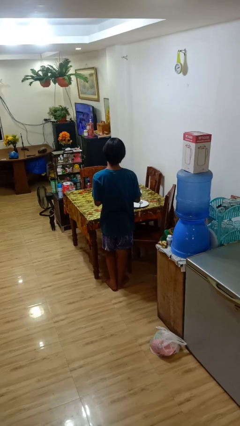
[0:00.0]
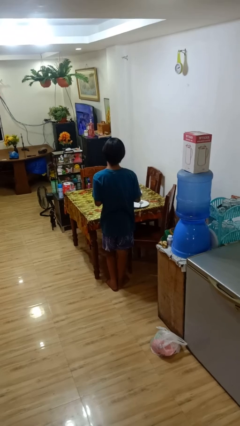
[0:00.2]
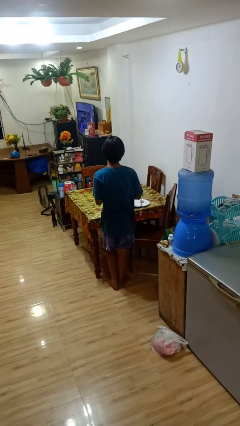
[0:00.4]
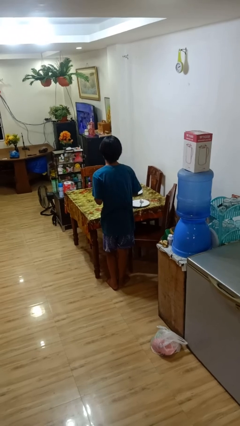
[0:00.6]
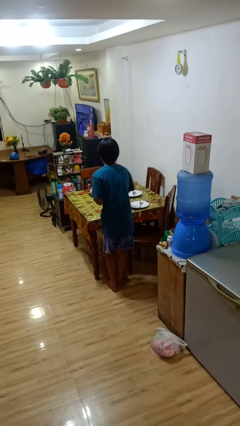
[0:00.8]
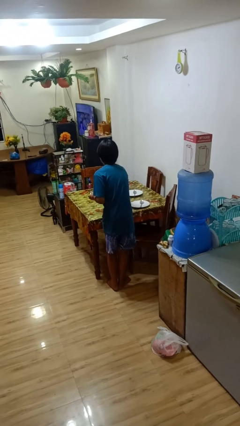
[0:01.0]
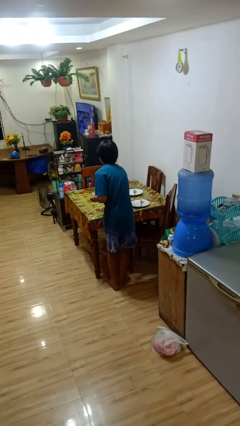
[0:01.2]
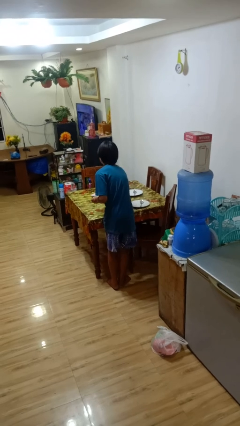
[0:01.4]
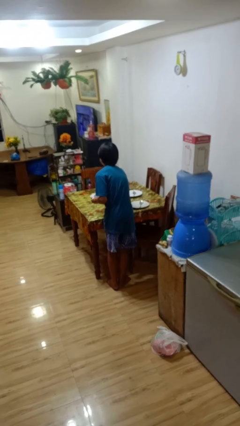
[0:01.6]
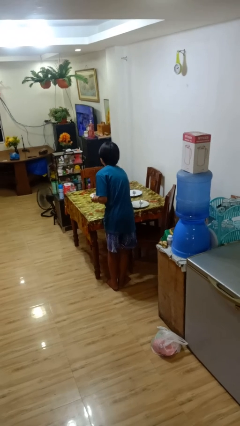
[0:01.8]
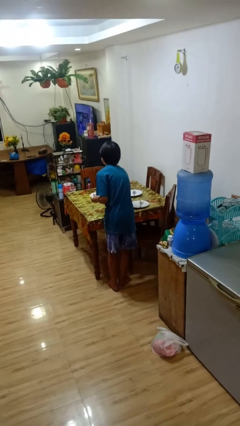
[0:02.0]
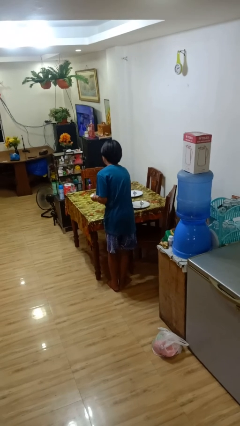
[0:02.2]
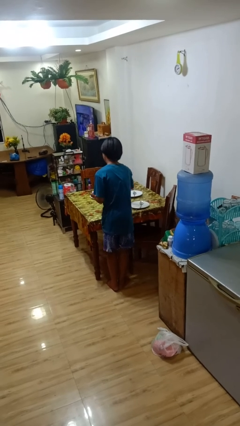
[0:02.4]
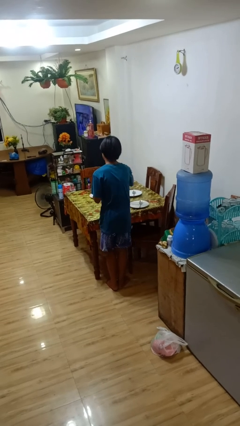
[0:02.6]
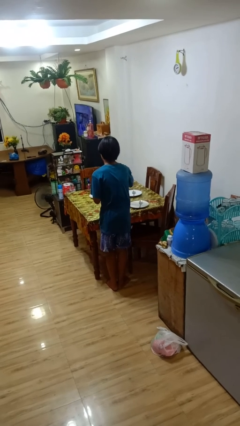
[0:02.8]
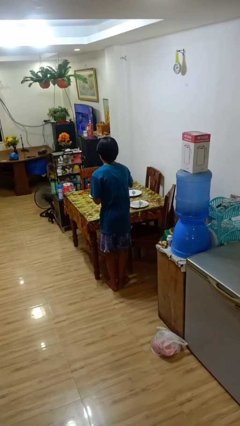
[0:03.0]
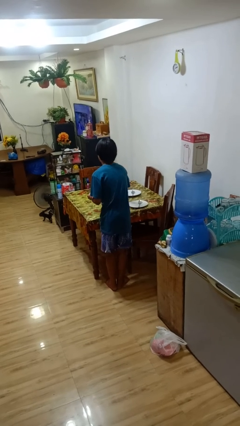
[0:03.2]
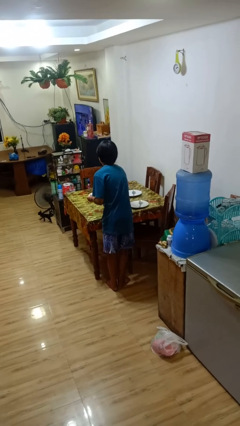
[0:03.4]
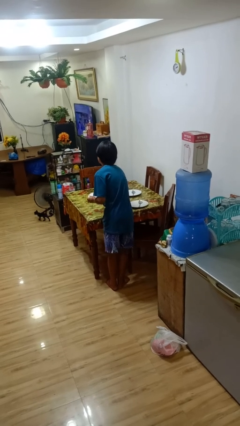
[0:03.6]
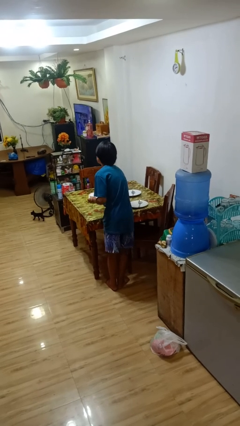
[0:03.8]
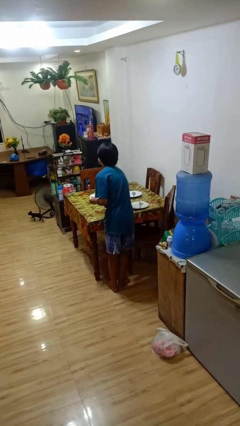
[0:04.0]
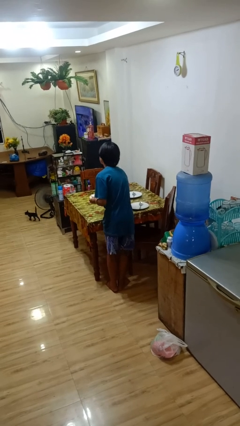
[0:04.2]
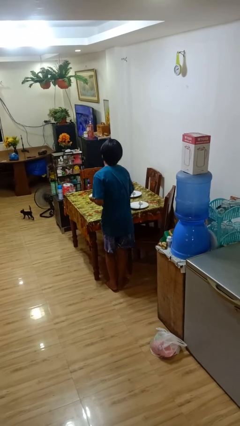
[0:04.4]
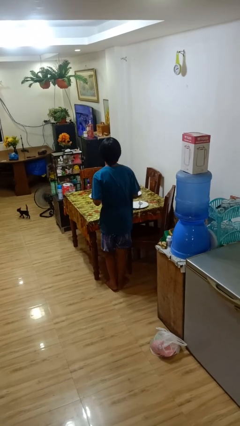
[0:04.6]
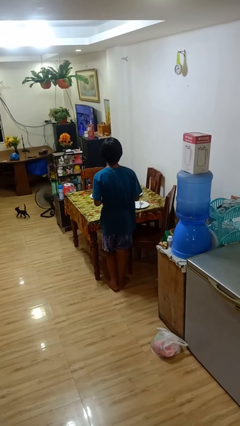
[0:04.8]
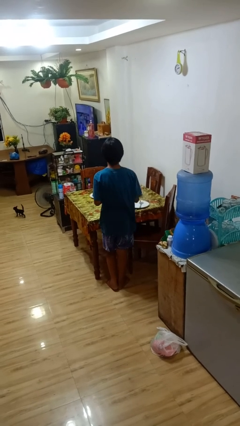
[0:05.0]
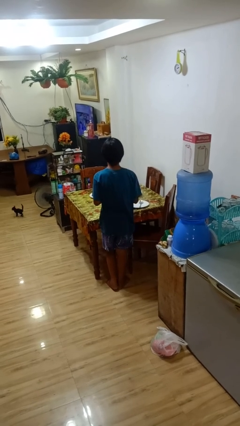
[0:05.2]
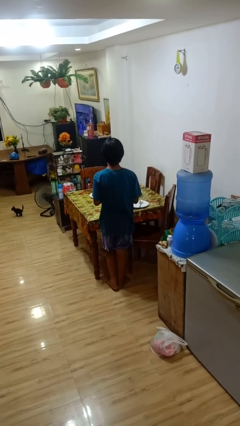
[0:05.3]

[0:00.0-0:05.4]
person sets table

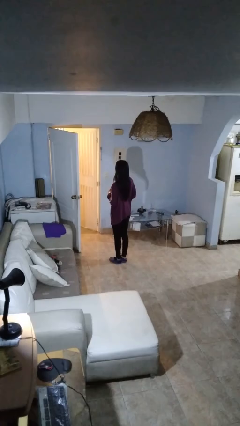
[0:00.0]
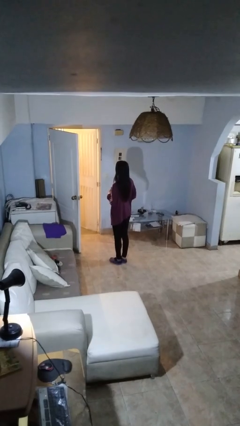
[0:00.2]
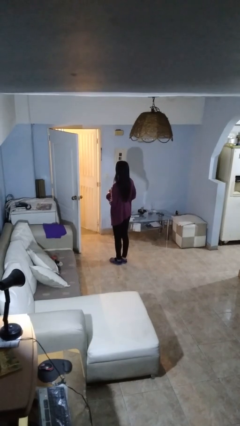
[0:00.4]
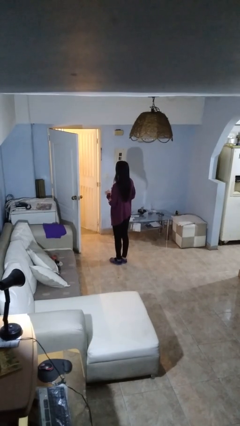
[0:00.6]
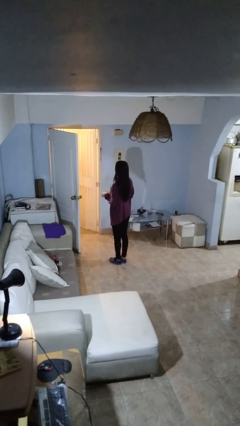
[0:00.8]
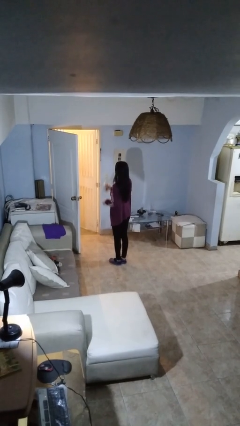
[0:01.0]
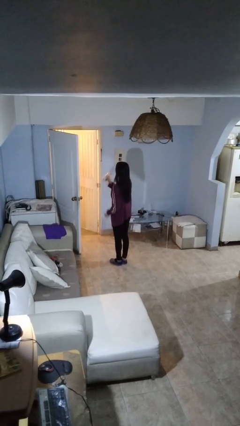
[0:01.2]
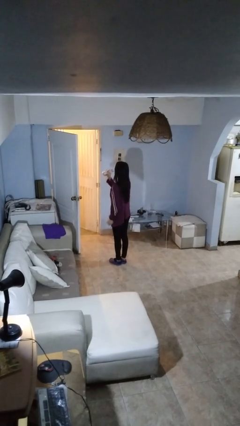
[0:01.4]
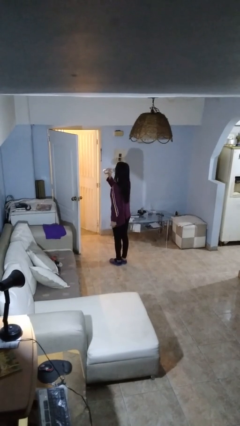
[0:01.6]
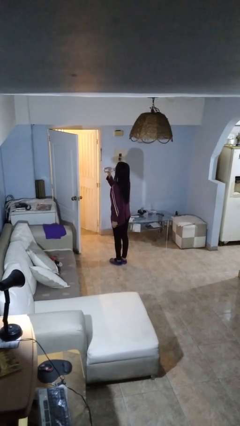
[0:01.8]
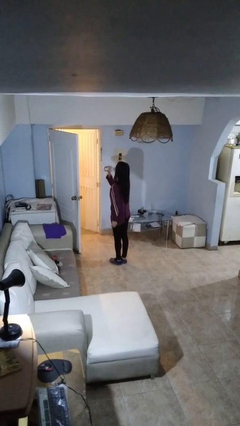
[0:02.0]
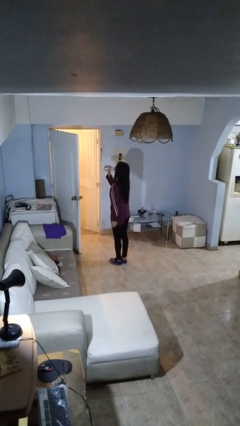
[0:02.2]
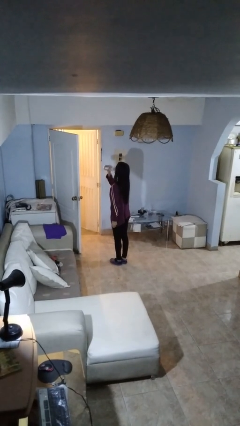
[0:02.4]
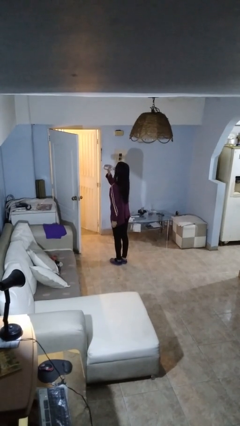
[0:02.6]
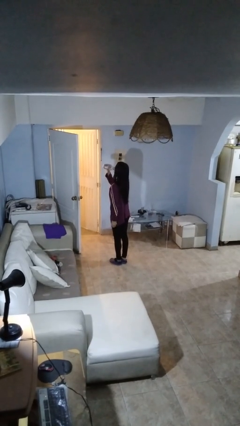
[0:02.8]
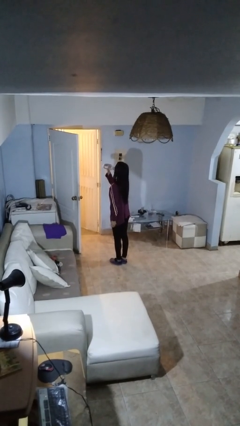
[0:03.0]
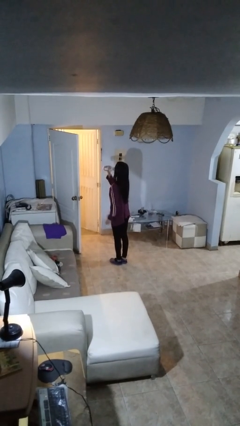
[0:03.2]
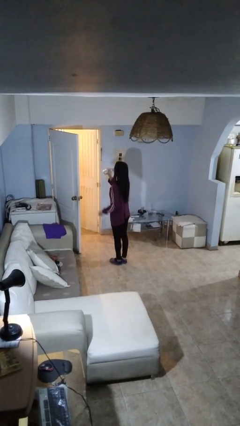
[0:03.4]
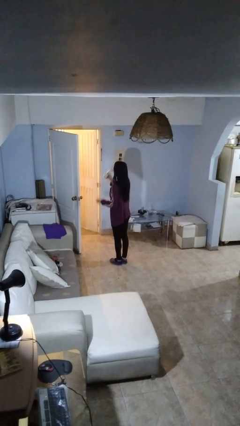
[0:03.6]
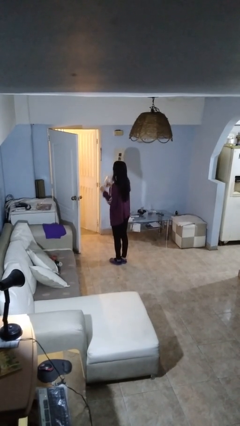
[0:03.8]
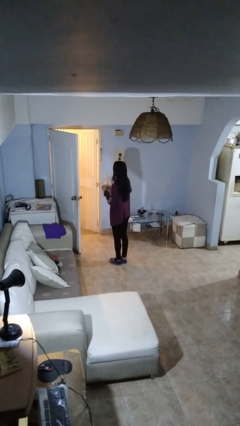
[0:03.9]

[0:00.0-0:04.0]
person drinks from bottle

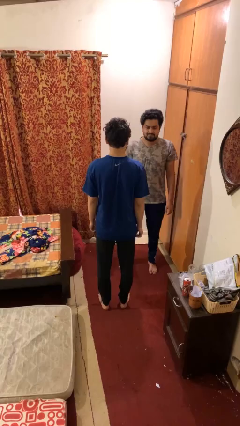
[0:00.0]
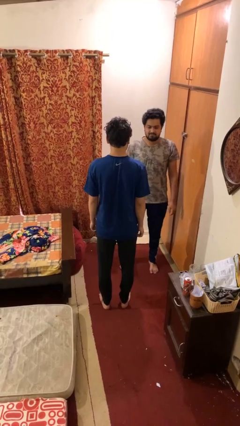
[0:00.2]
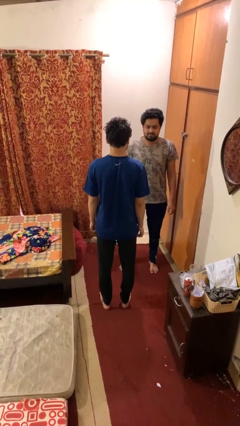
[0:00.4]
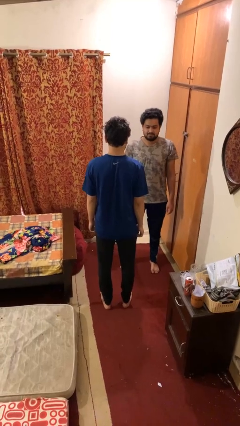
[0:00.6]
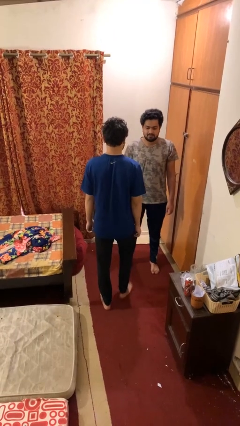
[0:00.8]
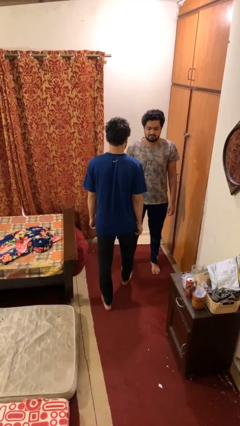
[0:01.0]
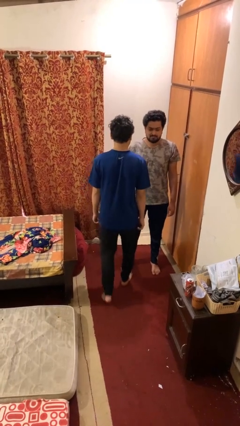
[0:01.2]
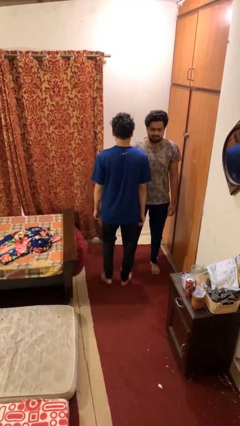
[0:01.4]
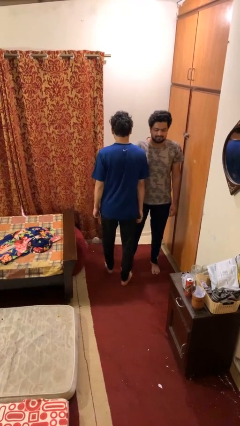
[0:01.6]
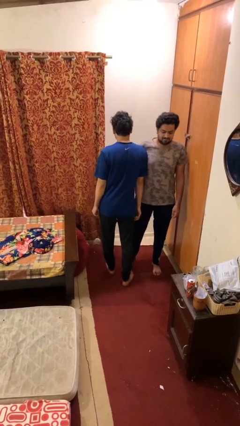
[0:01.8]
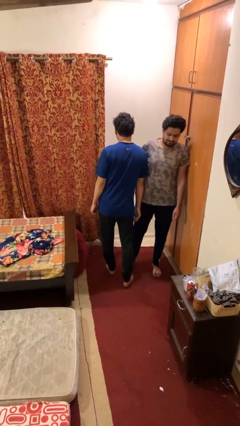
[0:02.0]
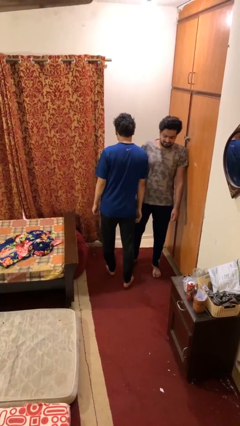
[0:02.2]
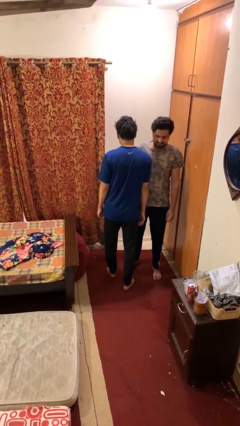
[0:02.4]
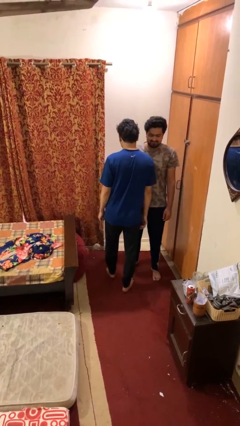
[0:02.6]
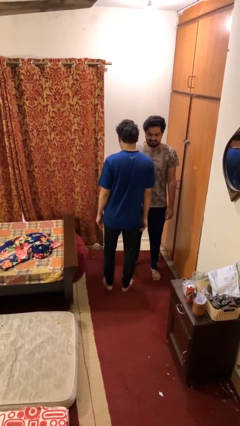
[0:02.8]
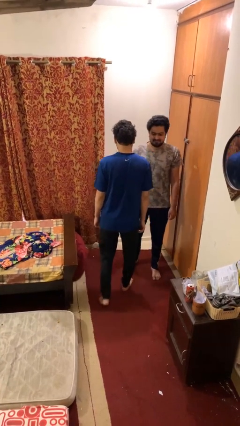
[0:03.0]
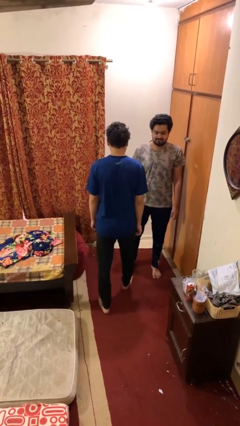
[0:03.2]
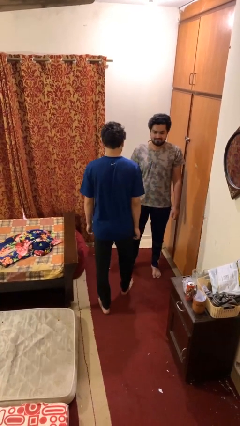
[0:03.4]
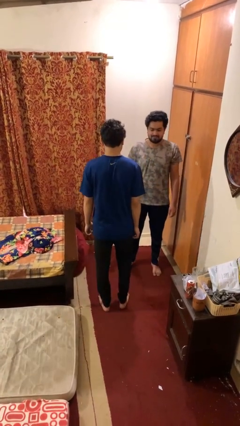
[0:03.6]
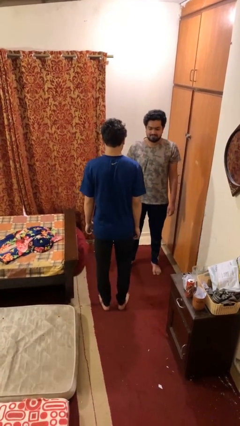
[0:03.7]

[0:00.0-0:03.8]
person bumps into person

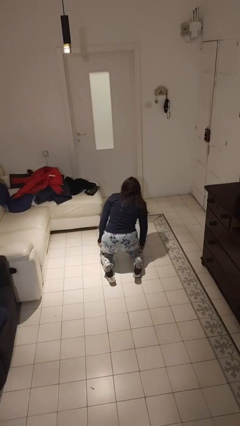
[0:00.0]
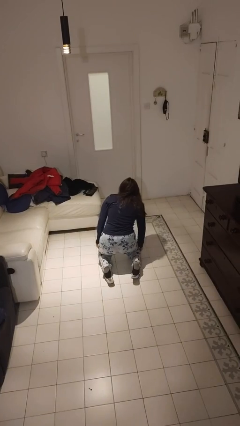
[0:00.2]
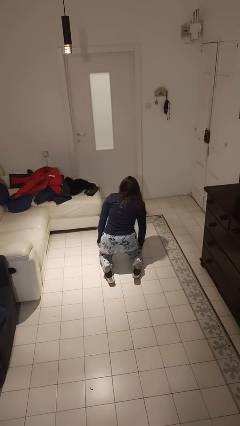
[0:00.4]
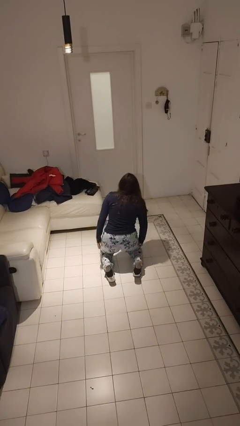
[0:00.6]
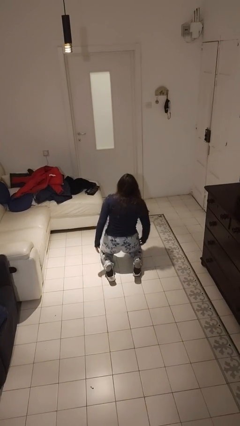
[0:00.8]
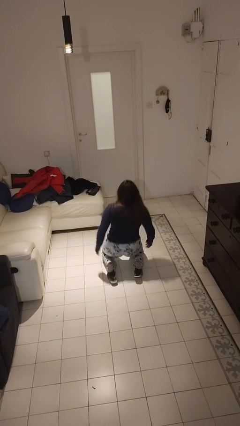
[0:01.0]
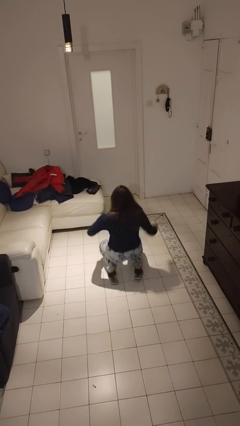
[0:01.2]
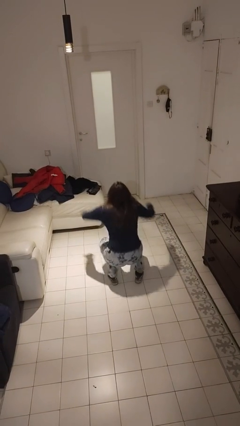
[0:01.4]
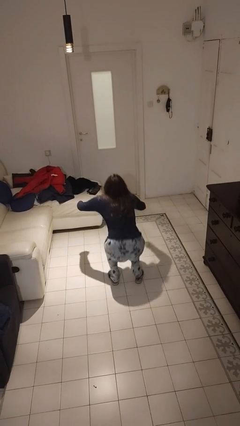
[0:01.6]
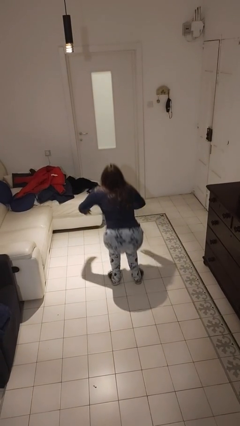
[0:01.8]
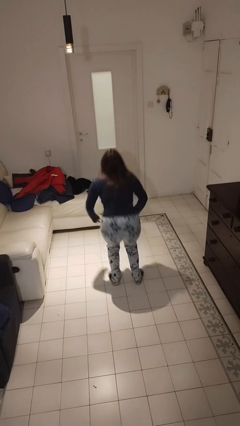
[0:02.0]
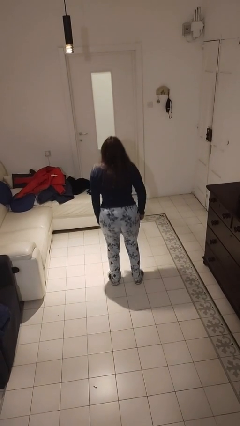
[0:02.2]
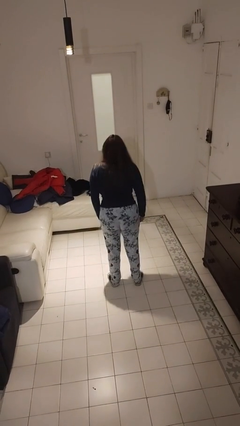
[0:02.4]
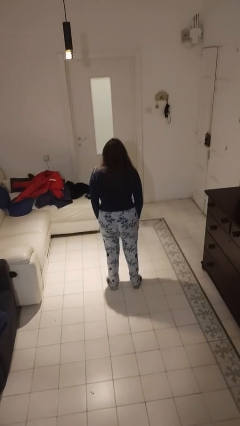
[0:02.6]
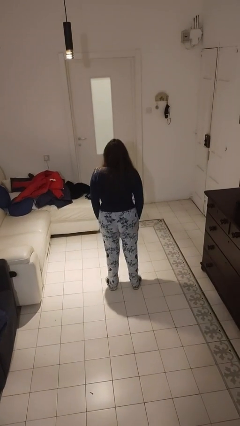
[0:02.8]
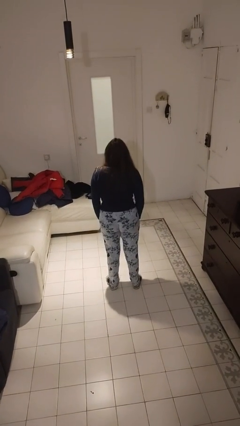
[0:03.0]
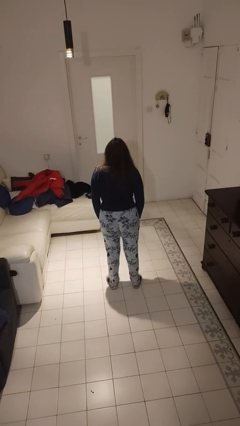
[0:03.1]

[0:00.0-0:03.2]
person stands up from floor

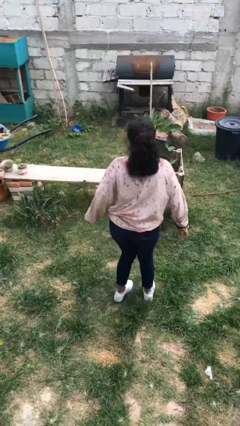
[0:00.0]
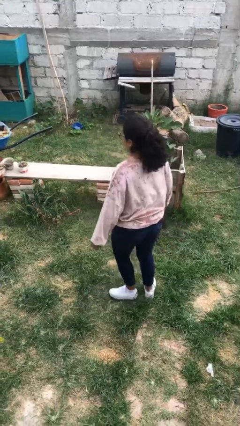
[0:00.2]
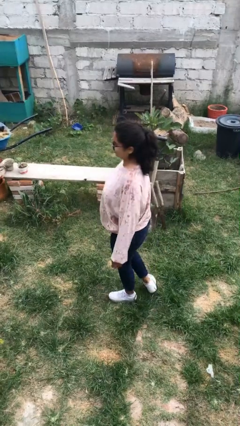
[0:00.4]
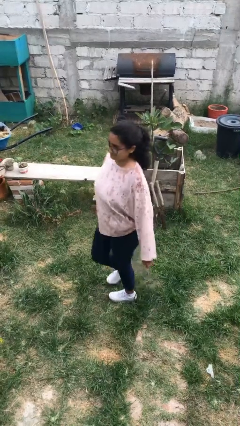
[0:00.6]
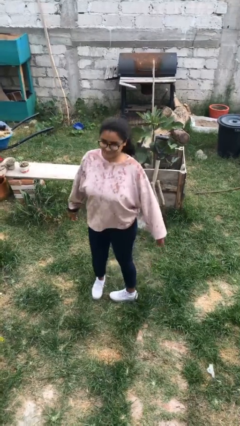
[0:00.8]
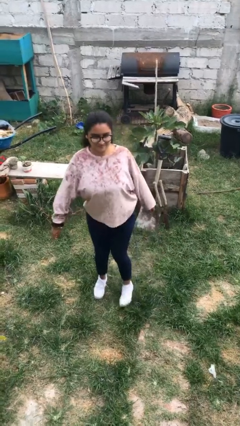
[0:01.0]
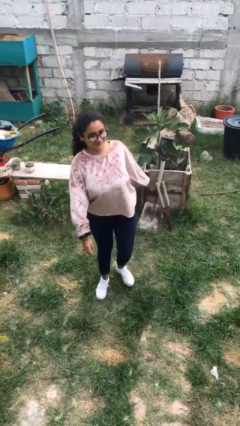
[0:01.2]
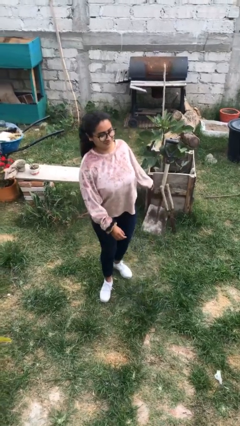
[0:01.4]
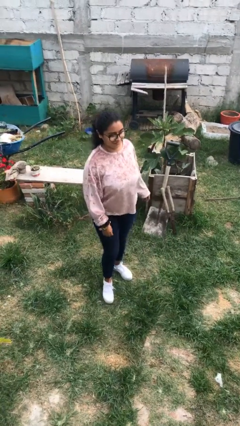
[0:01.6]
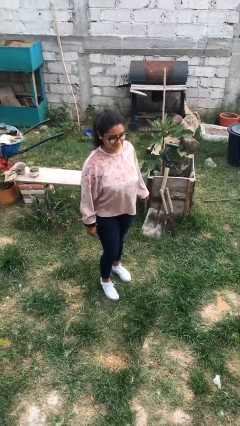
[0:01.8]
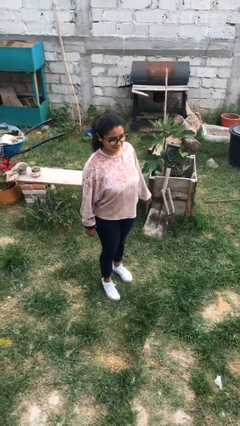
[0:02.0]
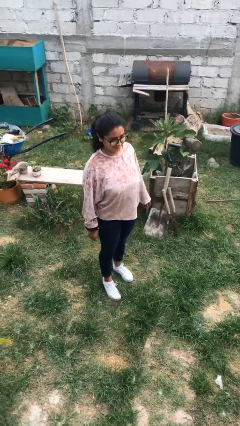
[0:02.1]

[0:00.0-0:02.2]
person twirls
